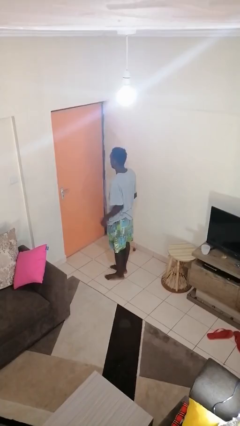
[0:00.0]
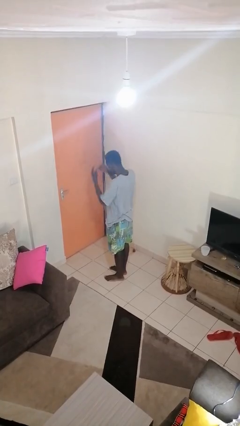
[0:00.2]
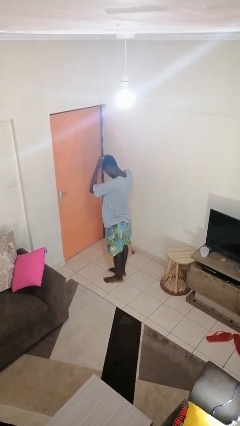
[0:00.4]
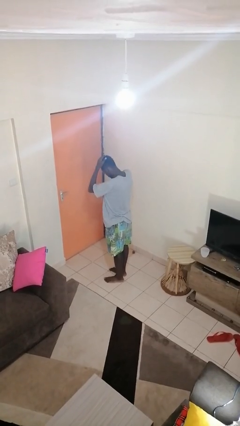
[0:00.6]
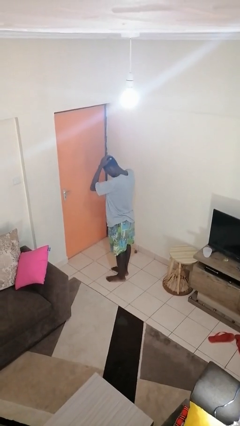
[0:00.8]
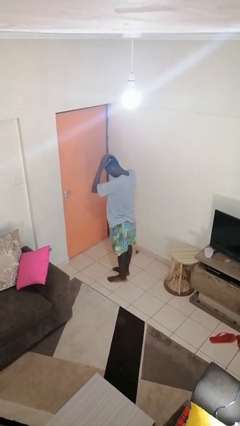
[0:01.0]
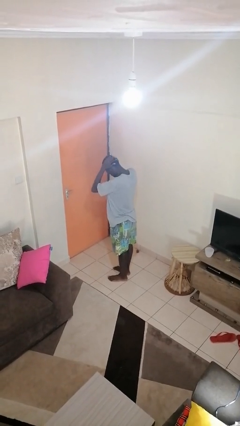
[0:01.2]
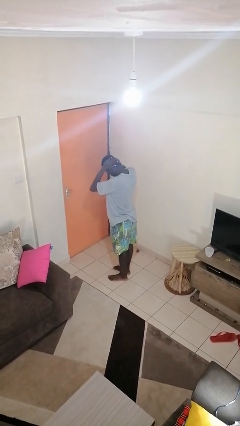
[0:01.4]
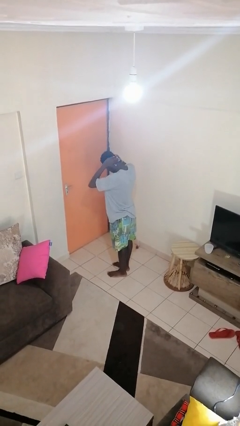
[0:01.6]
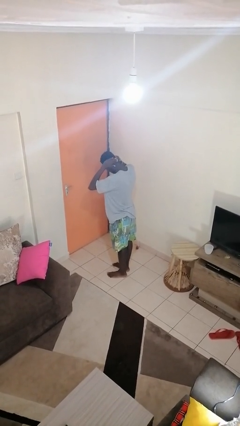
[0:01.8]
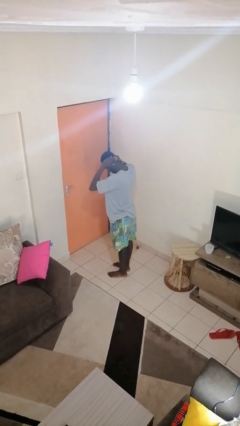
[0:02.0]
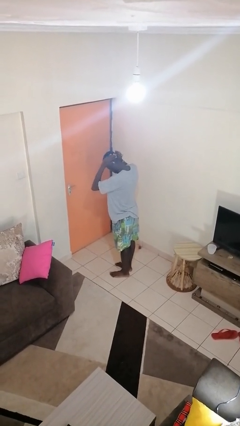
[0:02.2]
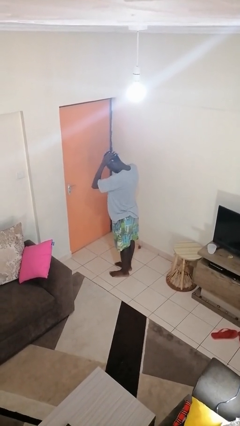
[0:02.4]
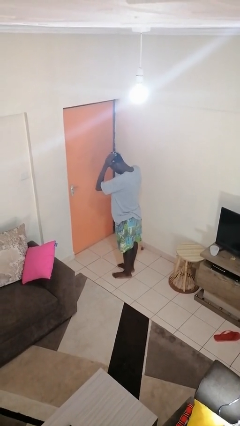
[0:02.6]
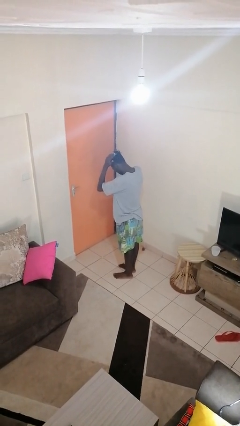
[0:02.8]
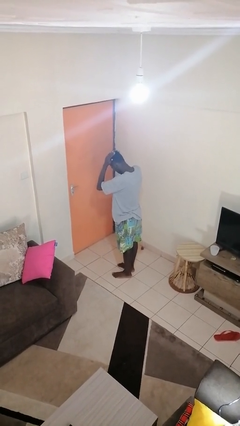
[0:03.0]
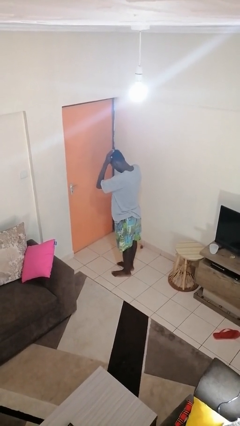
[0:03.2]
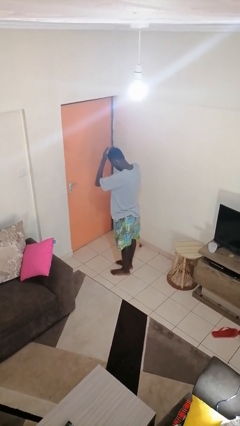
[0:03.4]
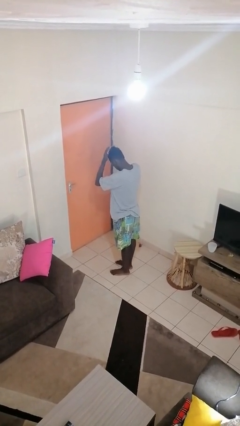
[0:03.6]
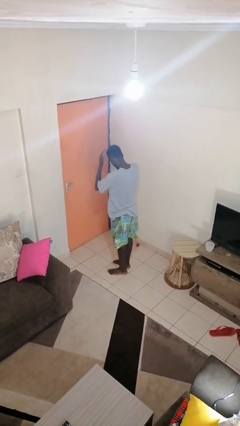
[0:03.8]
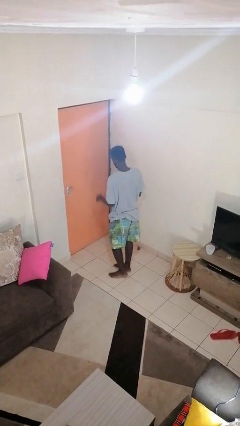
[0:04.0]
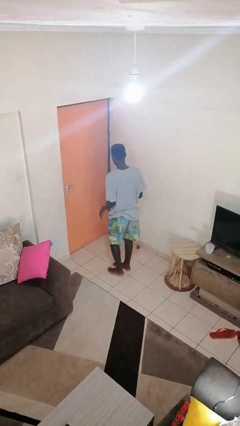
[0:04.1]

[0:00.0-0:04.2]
person pats head

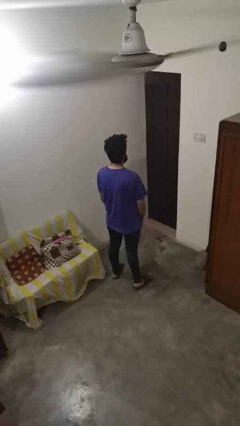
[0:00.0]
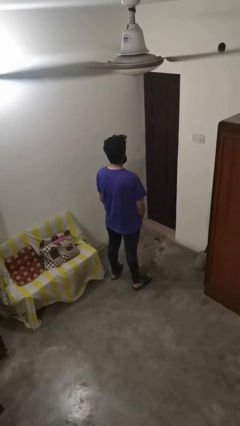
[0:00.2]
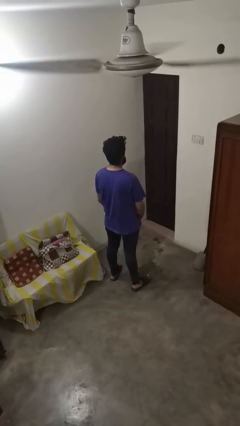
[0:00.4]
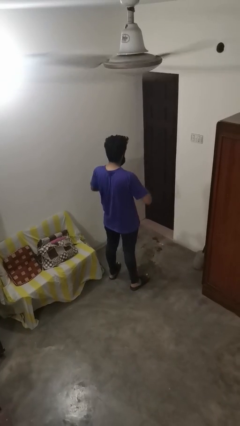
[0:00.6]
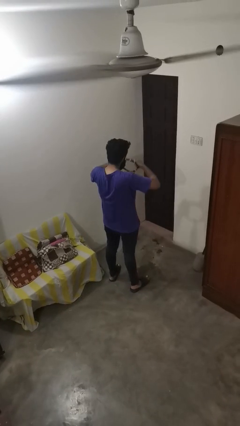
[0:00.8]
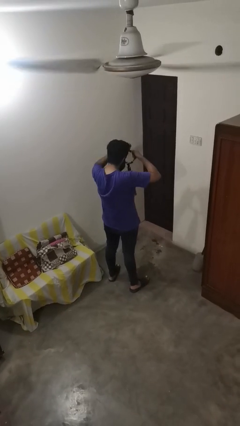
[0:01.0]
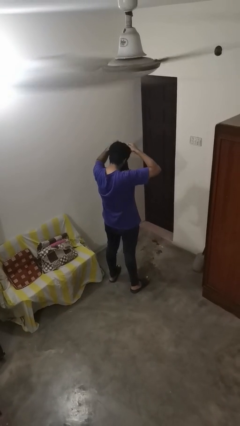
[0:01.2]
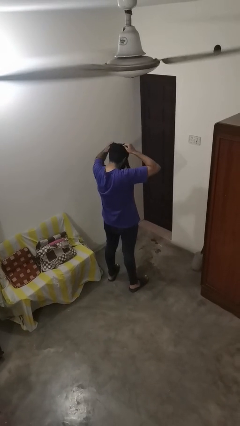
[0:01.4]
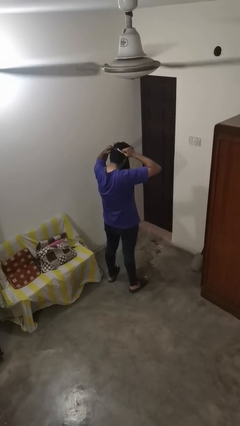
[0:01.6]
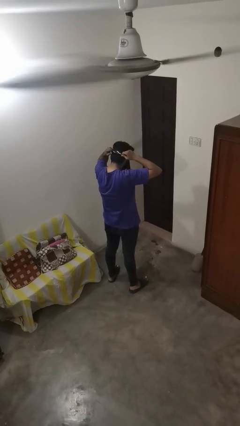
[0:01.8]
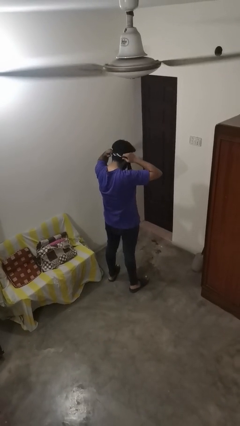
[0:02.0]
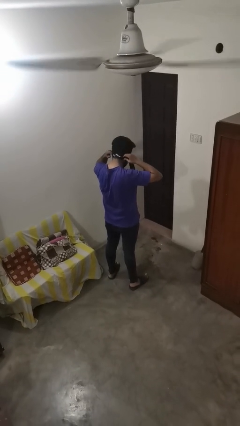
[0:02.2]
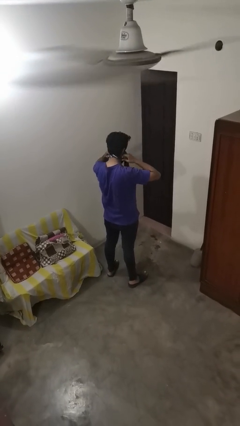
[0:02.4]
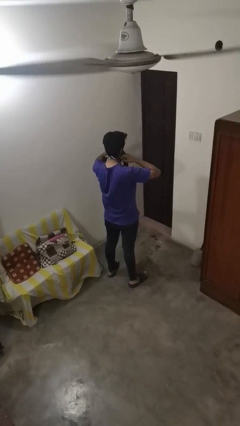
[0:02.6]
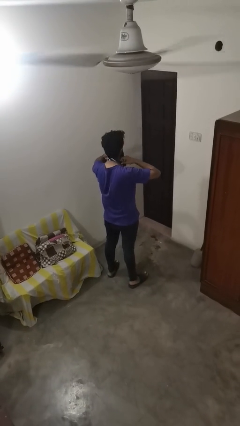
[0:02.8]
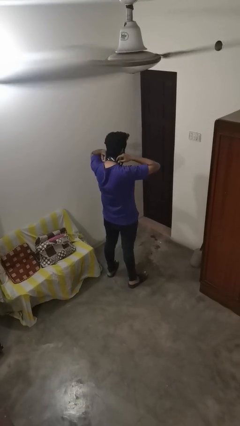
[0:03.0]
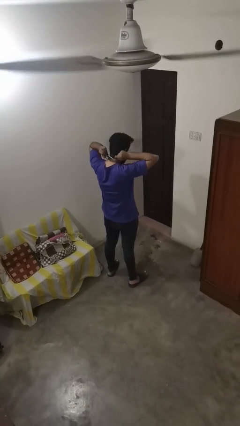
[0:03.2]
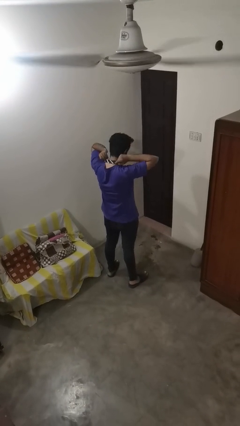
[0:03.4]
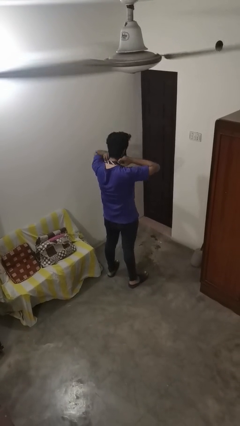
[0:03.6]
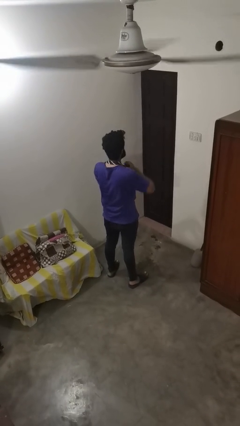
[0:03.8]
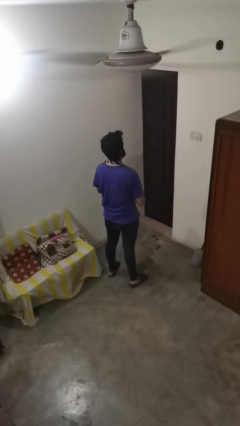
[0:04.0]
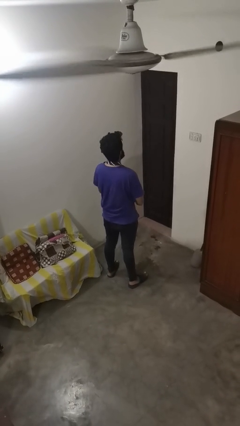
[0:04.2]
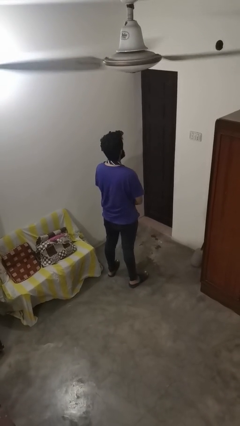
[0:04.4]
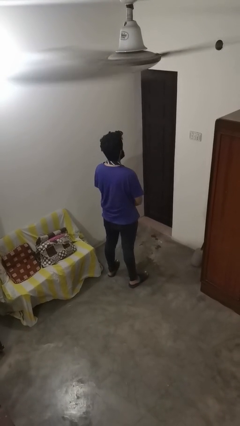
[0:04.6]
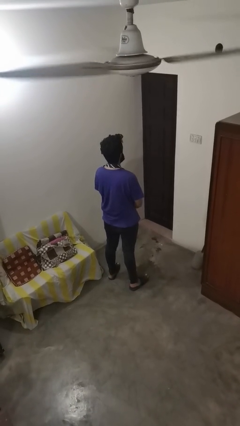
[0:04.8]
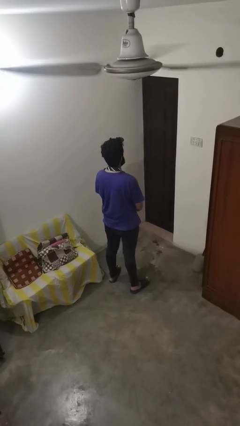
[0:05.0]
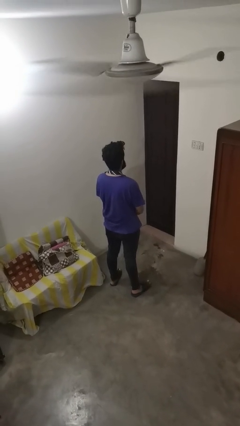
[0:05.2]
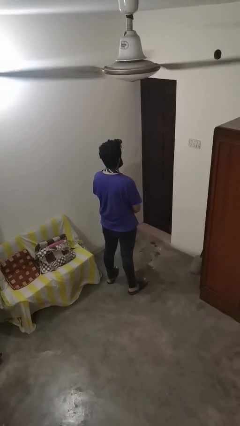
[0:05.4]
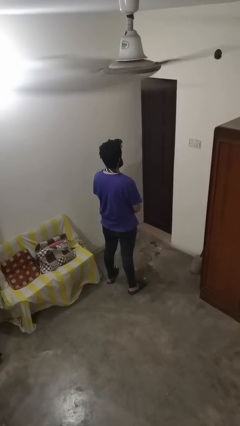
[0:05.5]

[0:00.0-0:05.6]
person puts on necktie

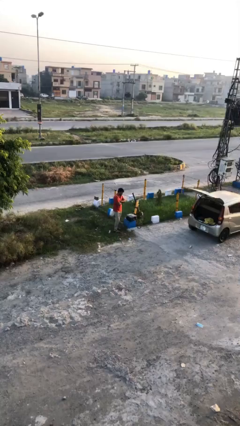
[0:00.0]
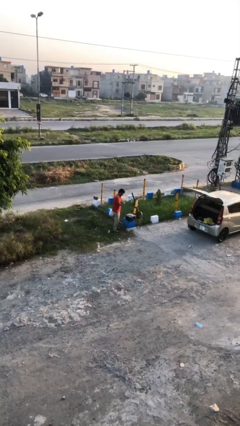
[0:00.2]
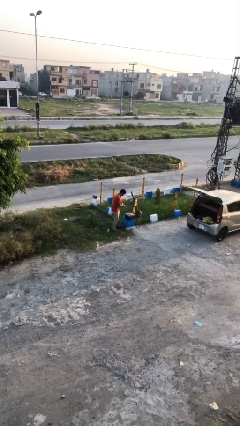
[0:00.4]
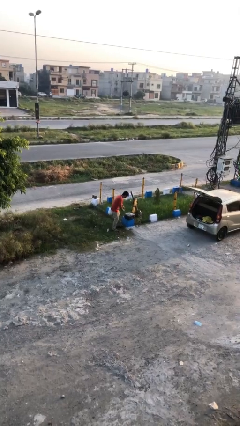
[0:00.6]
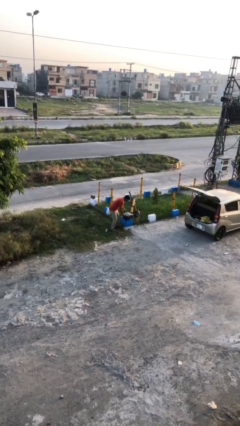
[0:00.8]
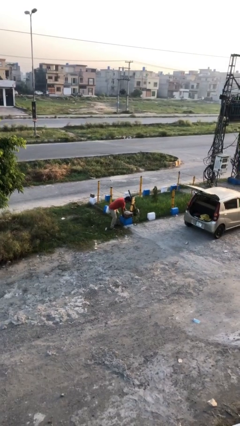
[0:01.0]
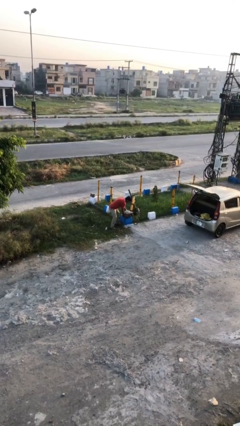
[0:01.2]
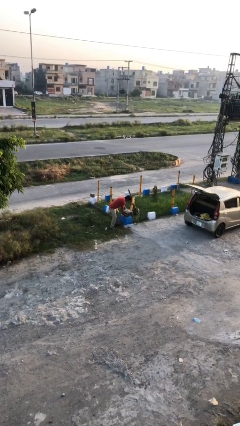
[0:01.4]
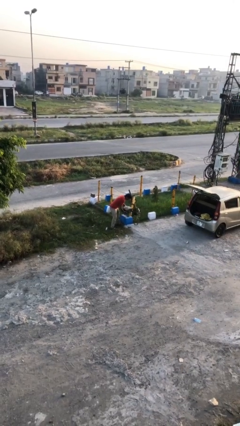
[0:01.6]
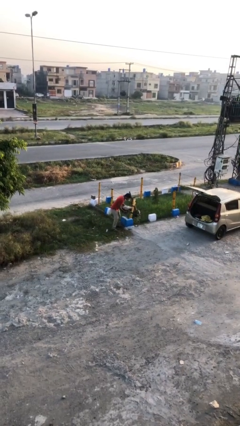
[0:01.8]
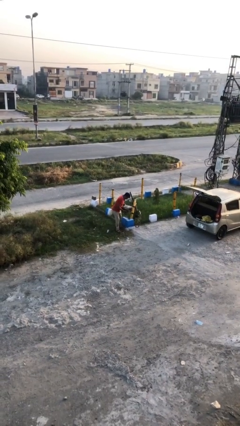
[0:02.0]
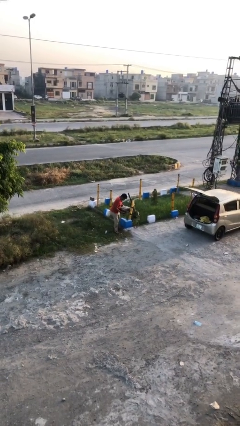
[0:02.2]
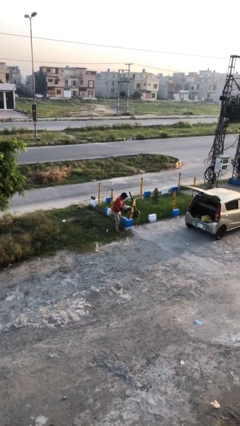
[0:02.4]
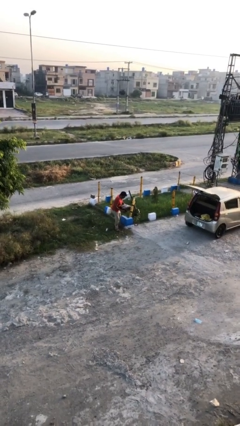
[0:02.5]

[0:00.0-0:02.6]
person picks up object from floor

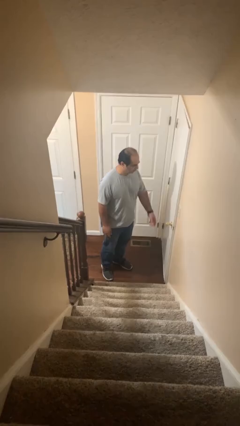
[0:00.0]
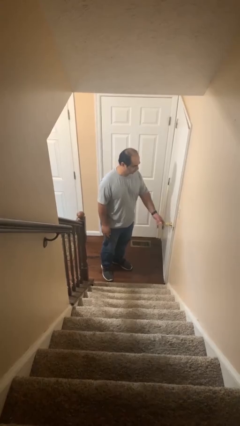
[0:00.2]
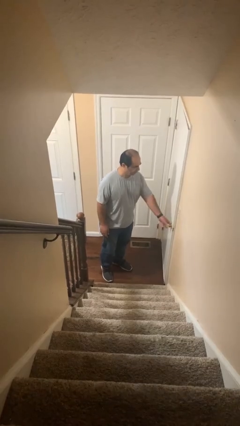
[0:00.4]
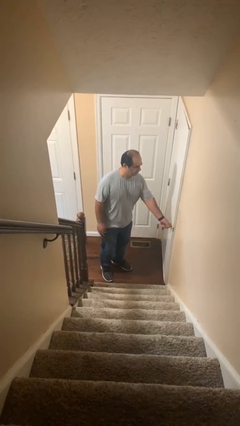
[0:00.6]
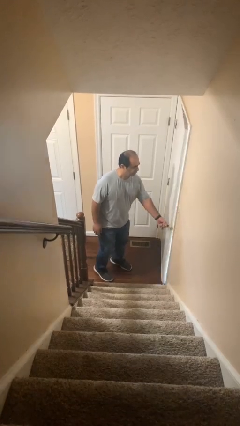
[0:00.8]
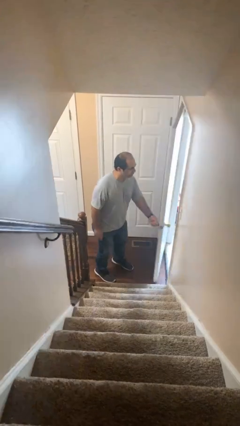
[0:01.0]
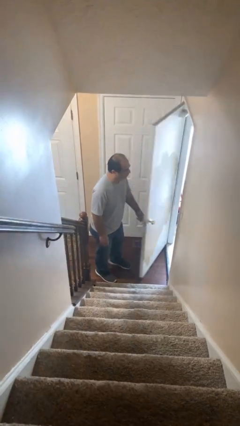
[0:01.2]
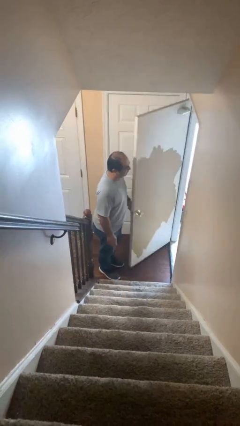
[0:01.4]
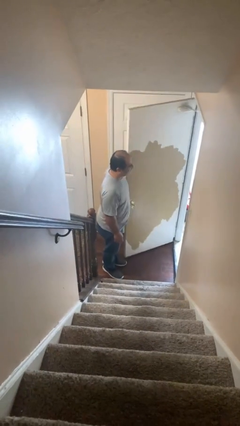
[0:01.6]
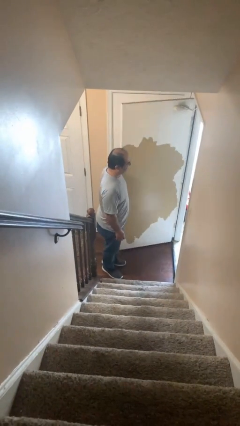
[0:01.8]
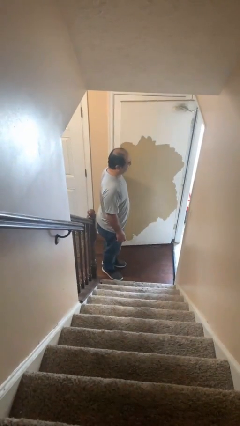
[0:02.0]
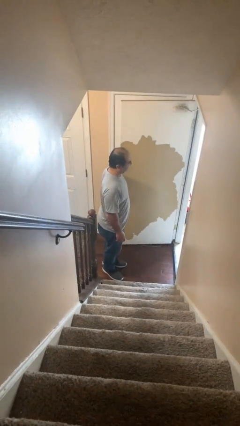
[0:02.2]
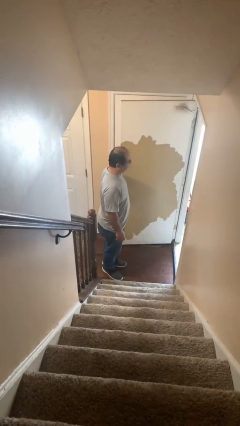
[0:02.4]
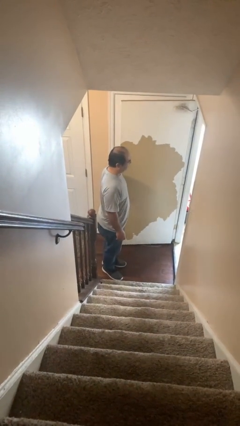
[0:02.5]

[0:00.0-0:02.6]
person opens facility door

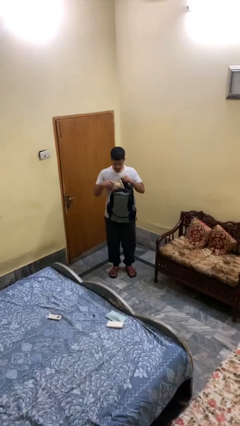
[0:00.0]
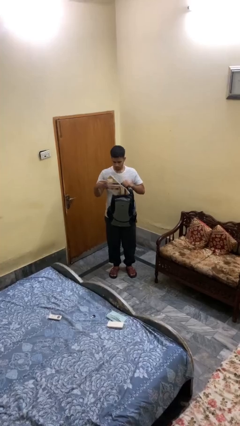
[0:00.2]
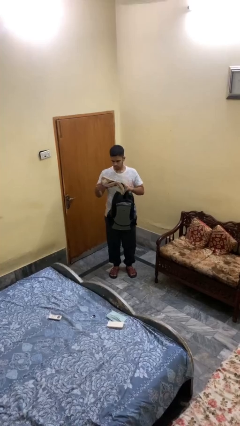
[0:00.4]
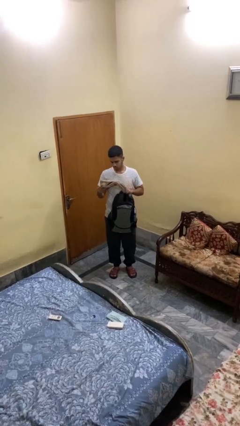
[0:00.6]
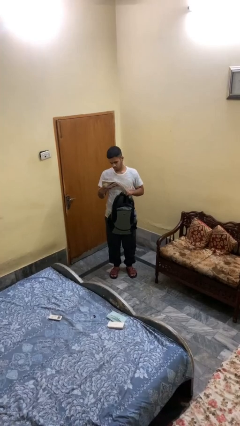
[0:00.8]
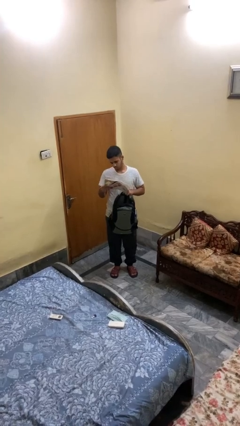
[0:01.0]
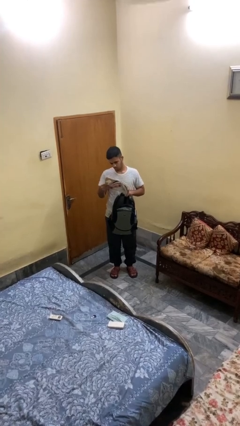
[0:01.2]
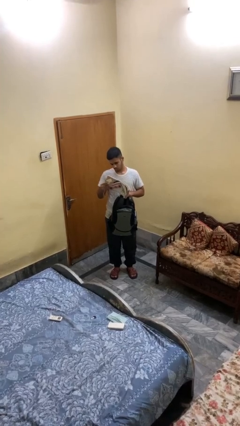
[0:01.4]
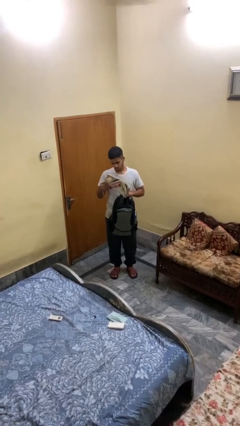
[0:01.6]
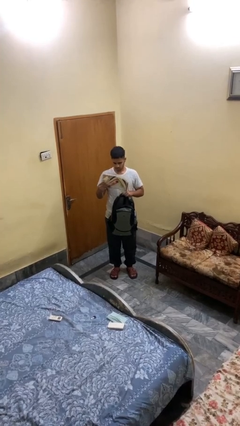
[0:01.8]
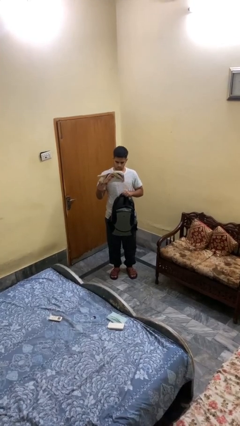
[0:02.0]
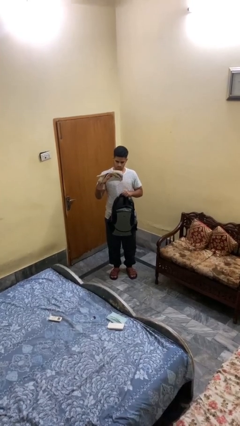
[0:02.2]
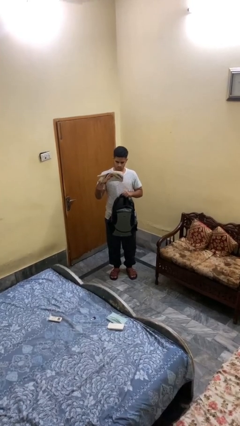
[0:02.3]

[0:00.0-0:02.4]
person takes object from backpack
